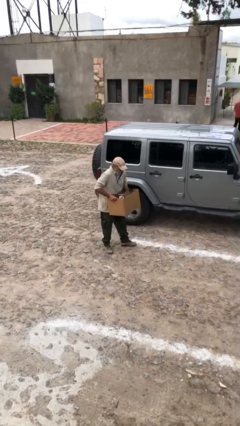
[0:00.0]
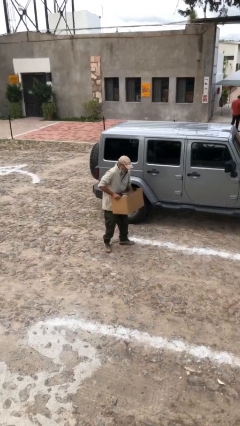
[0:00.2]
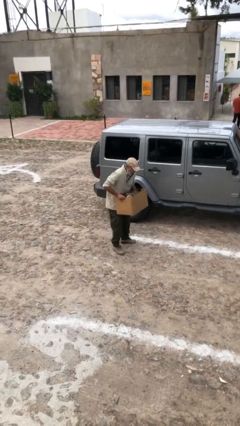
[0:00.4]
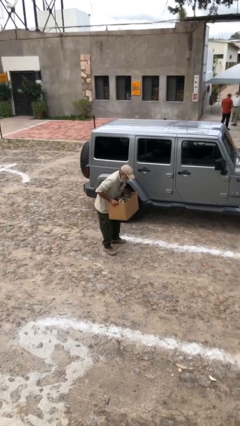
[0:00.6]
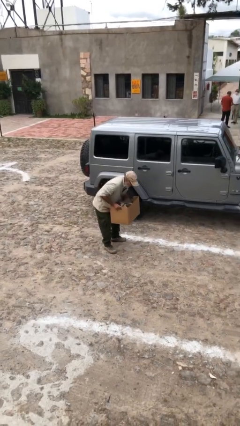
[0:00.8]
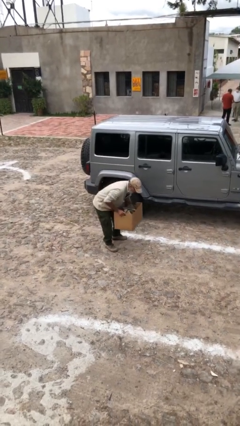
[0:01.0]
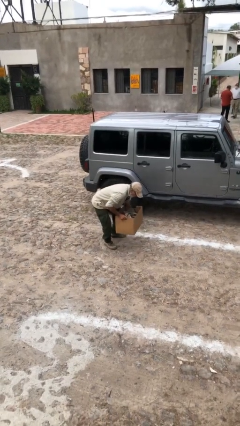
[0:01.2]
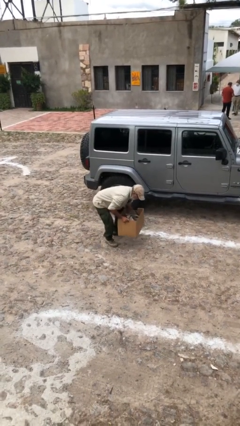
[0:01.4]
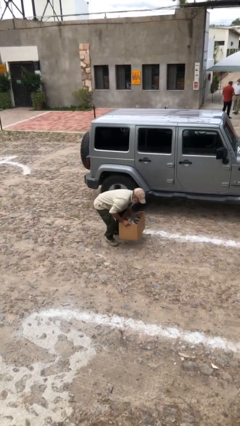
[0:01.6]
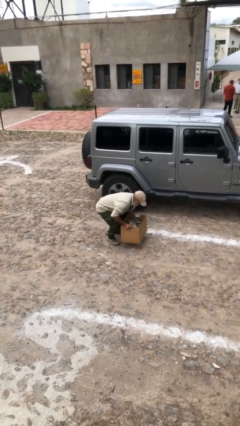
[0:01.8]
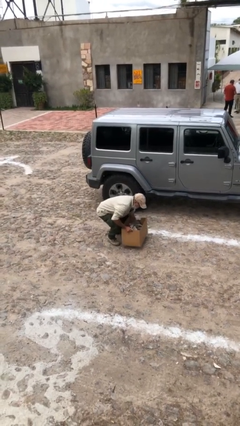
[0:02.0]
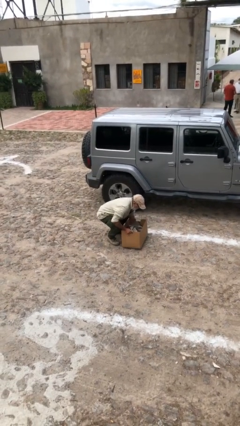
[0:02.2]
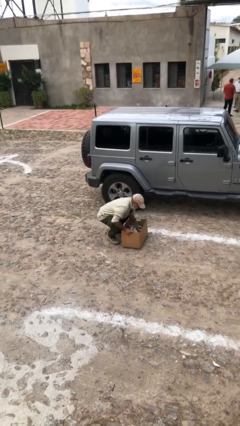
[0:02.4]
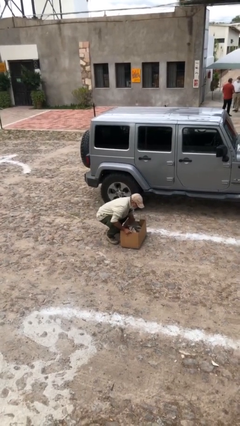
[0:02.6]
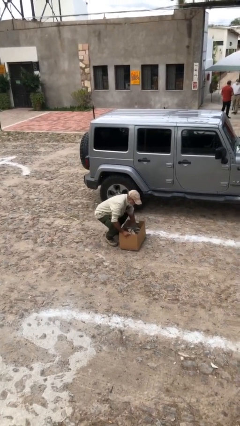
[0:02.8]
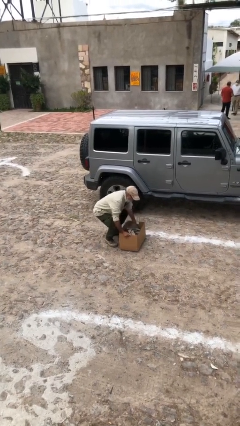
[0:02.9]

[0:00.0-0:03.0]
person puts down object on floor

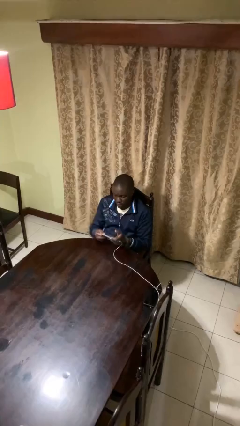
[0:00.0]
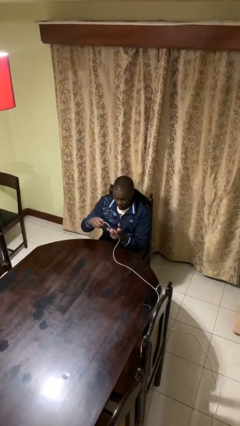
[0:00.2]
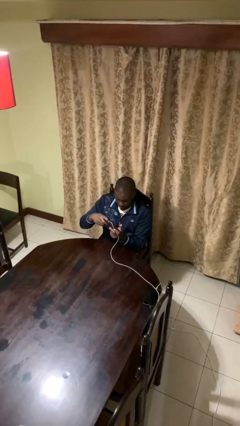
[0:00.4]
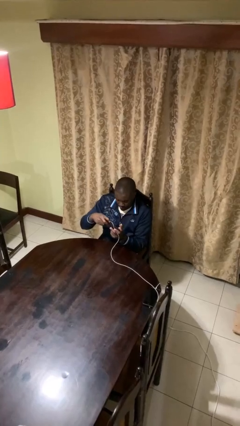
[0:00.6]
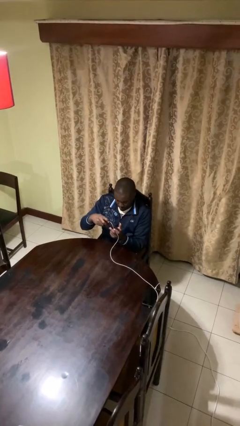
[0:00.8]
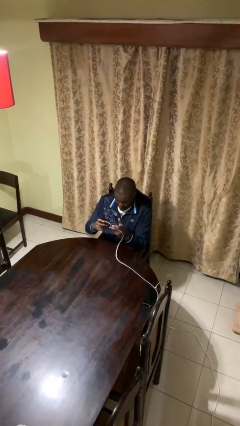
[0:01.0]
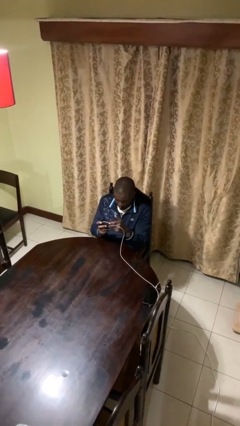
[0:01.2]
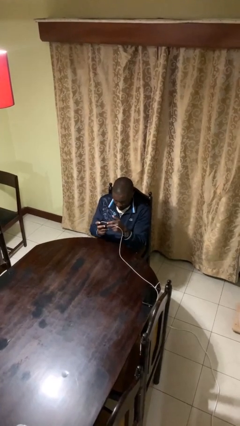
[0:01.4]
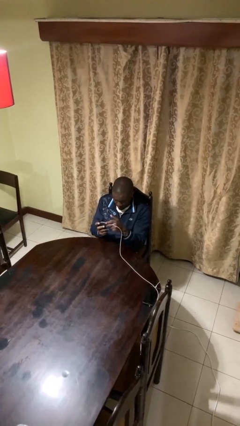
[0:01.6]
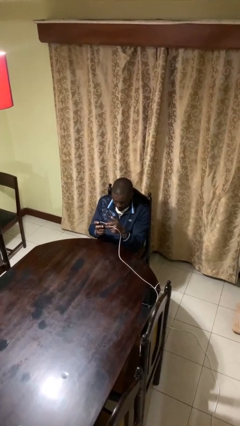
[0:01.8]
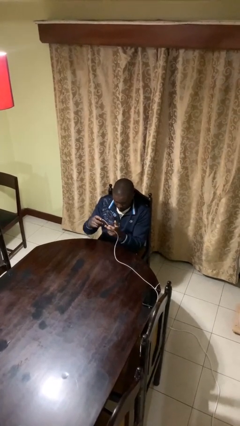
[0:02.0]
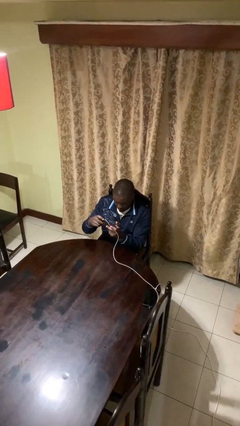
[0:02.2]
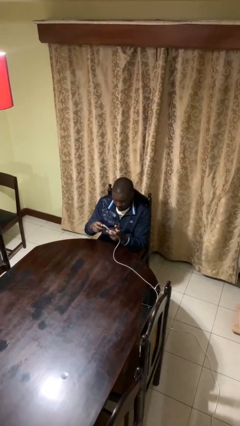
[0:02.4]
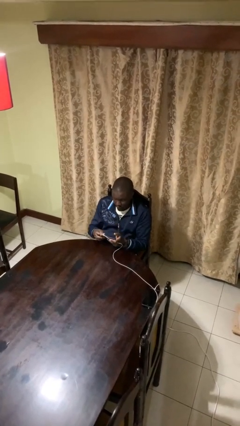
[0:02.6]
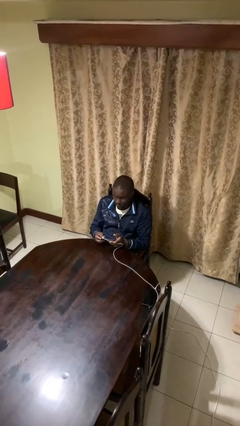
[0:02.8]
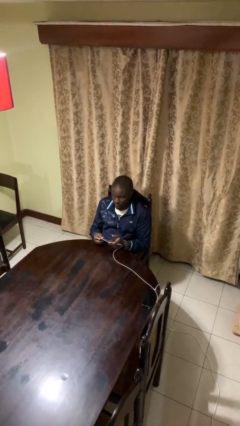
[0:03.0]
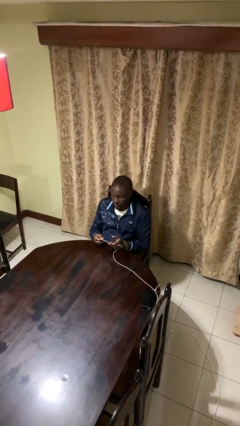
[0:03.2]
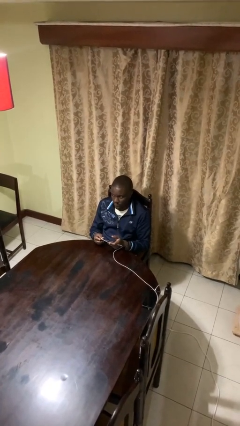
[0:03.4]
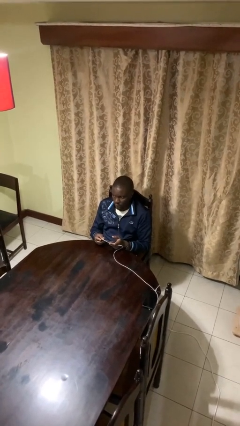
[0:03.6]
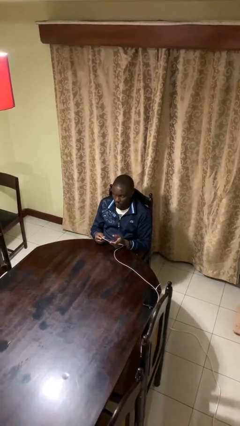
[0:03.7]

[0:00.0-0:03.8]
person interacts with handheld game

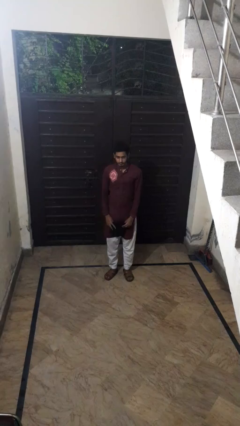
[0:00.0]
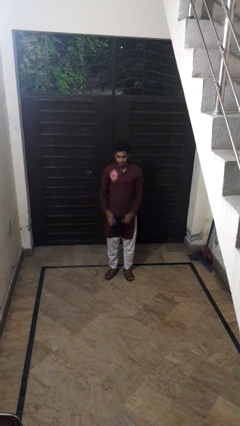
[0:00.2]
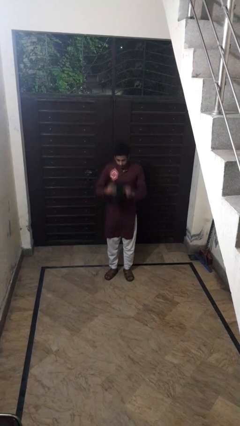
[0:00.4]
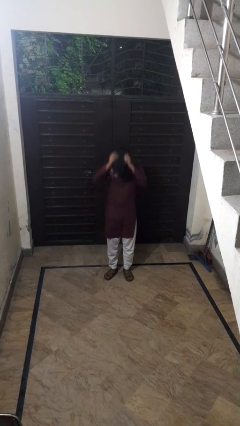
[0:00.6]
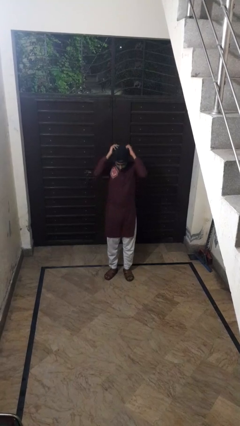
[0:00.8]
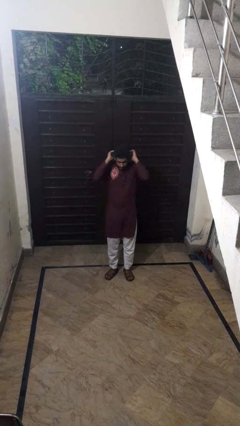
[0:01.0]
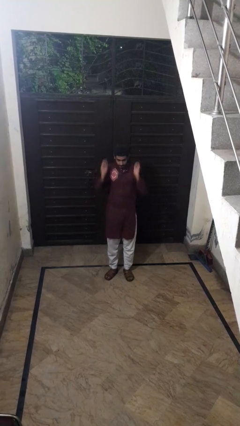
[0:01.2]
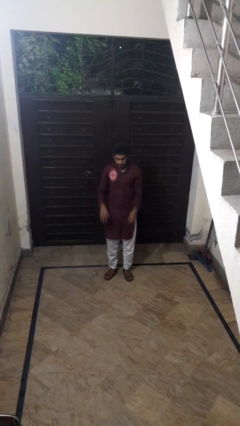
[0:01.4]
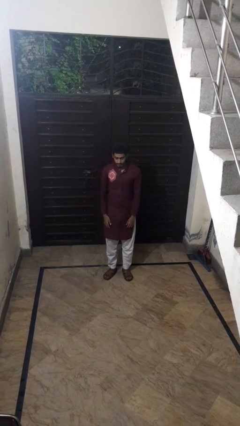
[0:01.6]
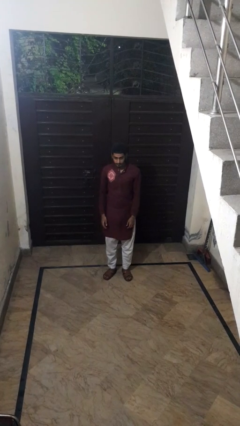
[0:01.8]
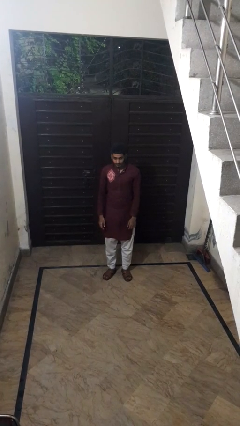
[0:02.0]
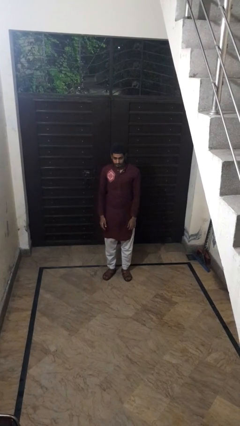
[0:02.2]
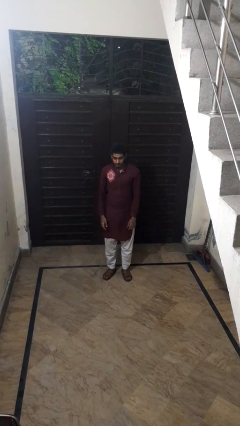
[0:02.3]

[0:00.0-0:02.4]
person puts on hat

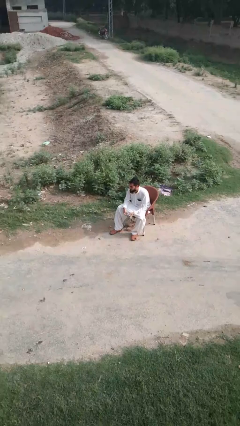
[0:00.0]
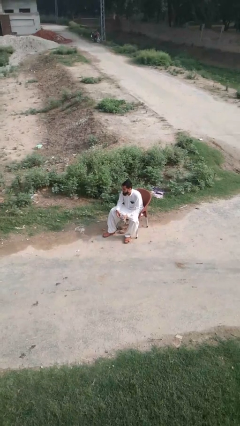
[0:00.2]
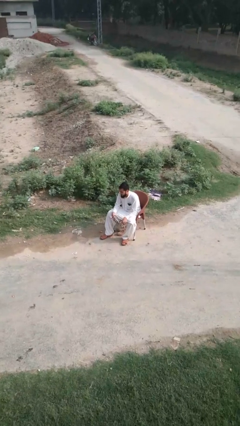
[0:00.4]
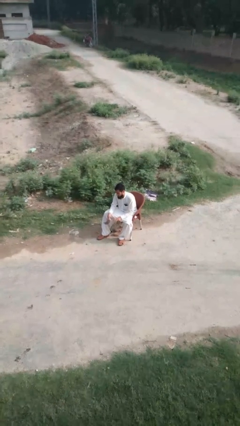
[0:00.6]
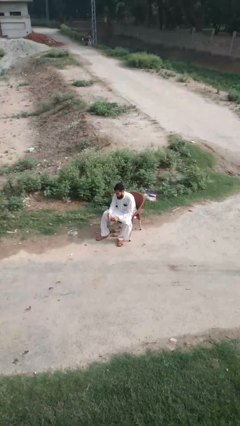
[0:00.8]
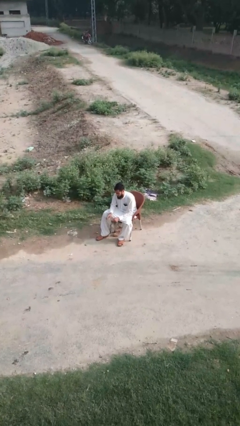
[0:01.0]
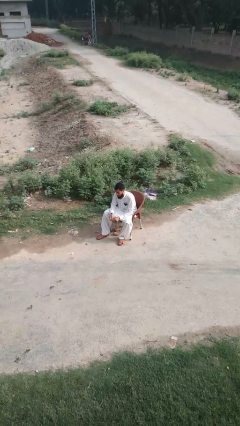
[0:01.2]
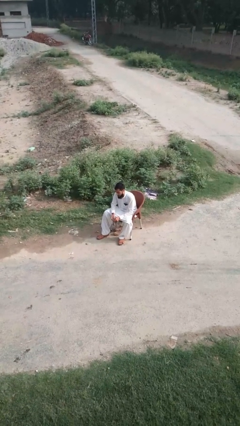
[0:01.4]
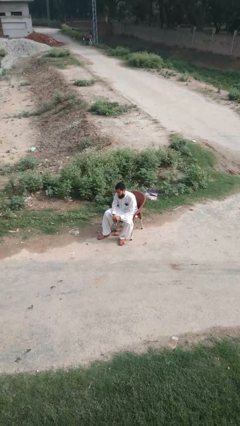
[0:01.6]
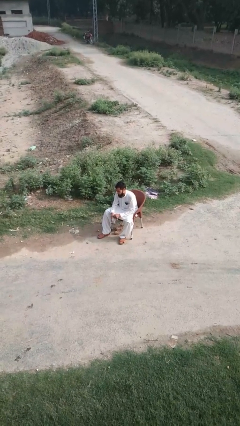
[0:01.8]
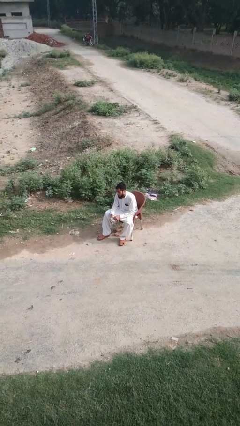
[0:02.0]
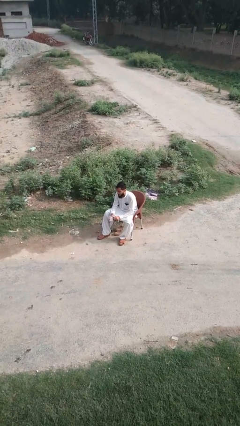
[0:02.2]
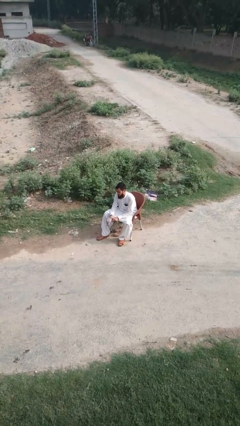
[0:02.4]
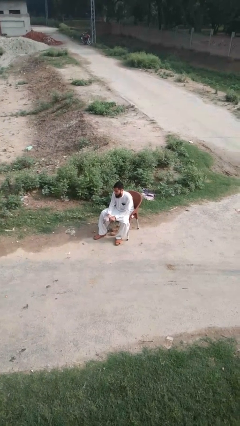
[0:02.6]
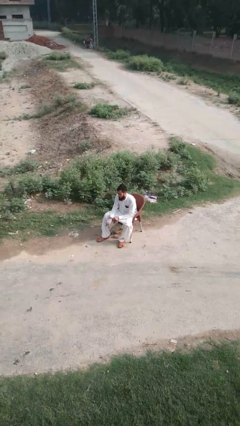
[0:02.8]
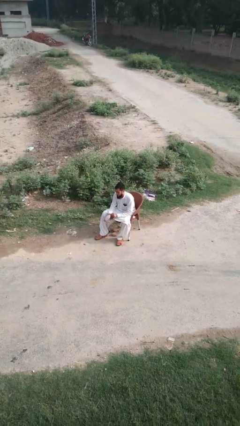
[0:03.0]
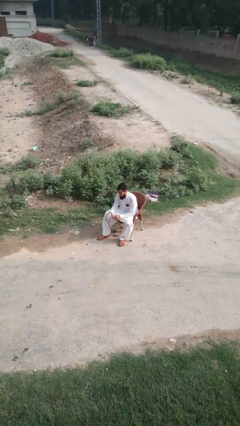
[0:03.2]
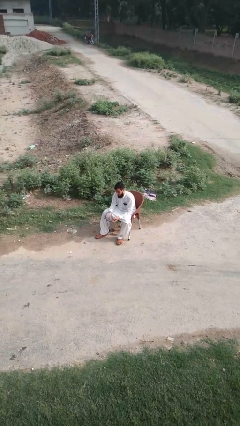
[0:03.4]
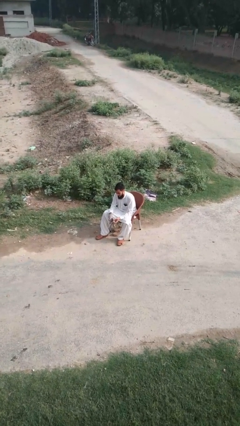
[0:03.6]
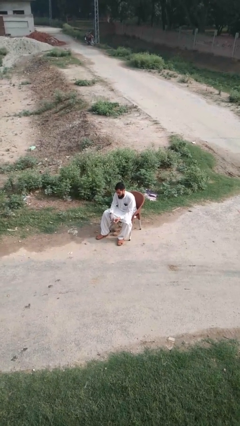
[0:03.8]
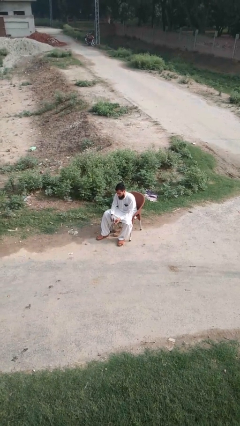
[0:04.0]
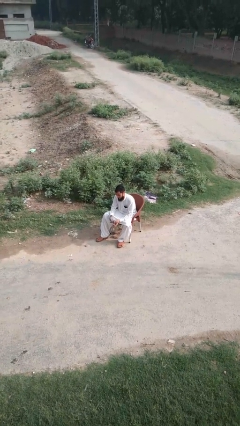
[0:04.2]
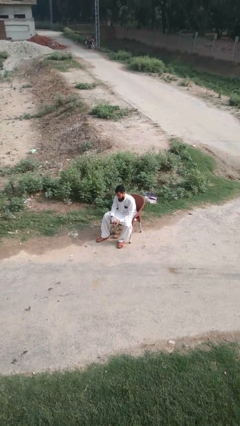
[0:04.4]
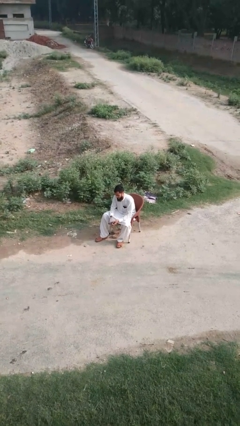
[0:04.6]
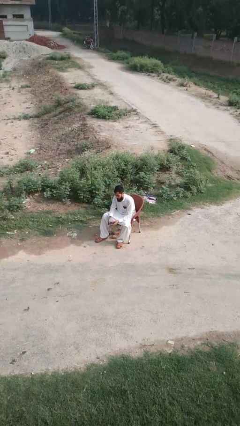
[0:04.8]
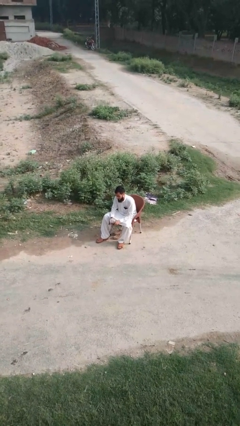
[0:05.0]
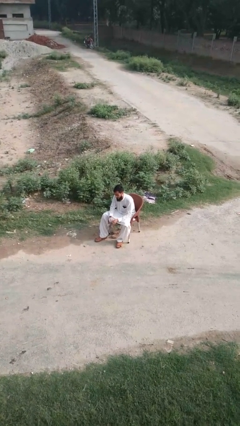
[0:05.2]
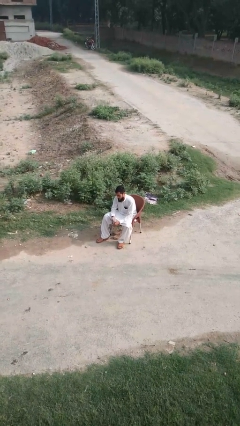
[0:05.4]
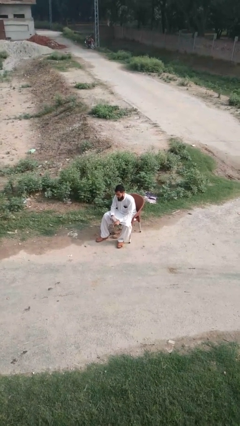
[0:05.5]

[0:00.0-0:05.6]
person puts on gloves

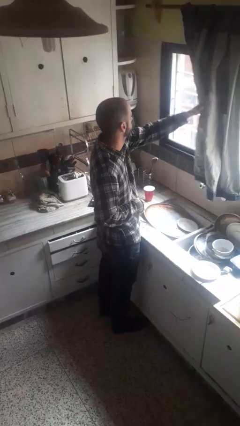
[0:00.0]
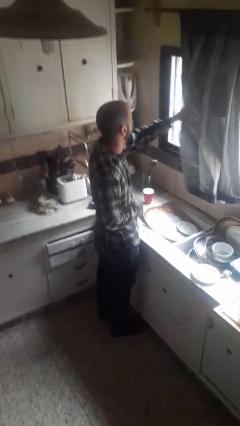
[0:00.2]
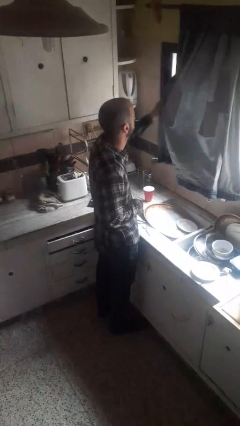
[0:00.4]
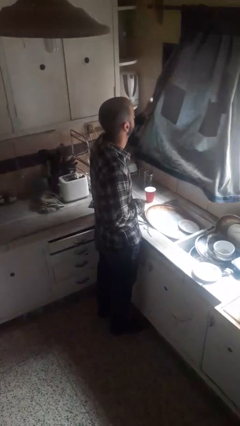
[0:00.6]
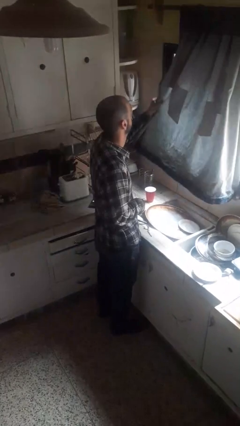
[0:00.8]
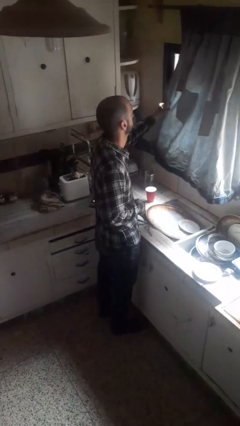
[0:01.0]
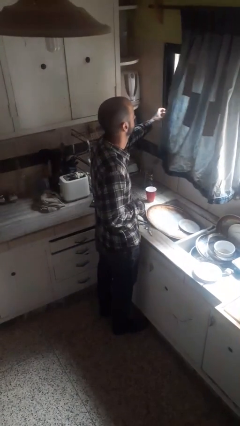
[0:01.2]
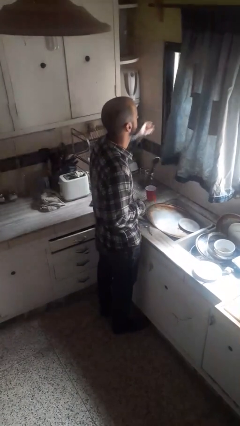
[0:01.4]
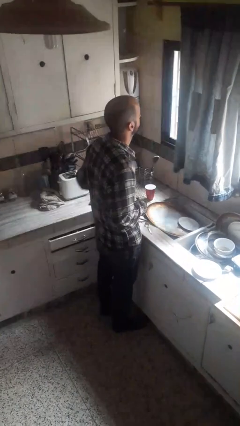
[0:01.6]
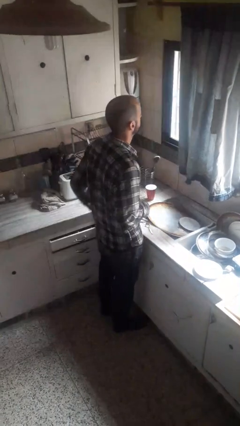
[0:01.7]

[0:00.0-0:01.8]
person closes curtains

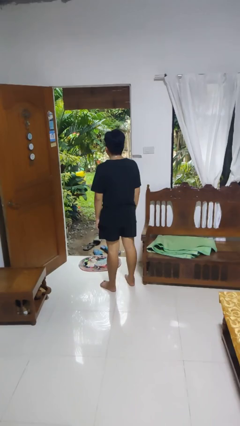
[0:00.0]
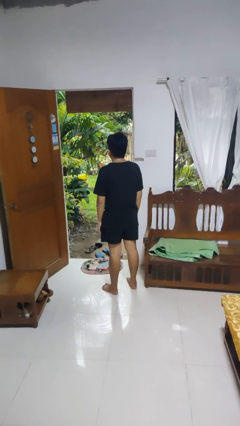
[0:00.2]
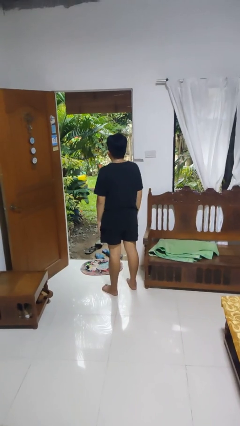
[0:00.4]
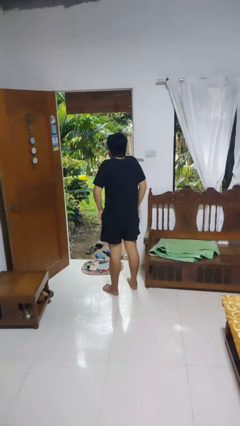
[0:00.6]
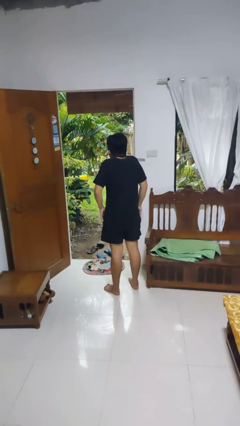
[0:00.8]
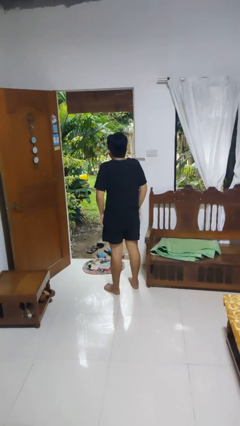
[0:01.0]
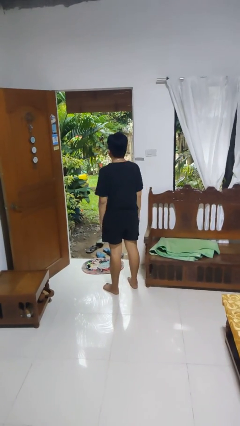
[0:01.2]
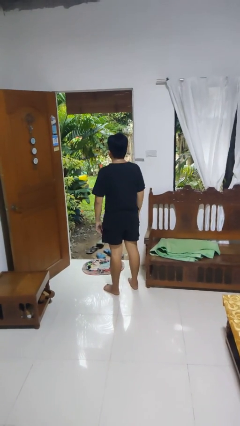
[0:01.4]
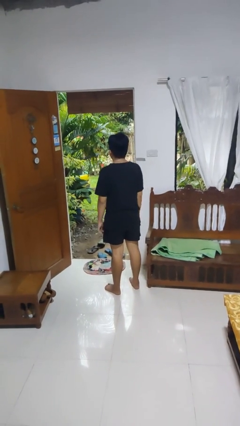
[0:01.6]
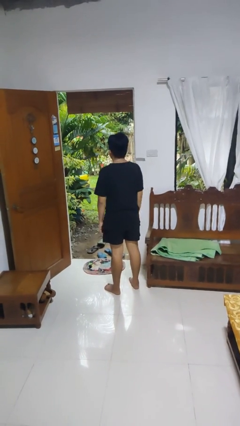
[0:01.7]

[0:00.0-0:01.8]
person shrugs
